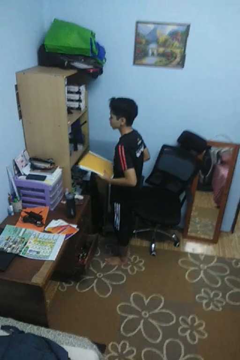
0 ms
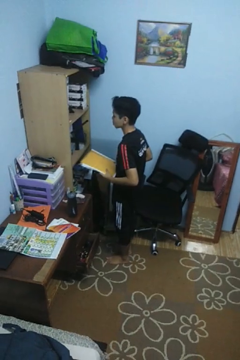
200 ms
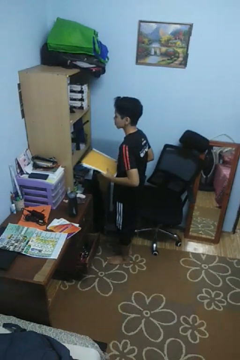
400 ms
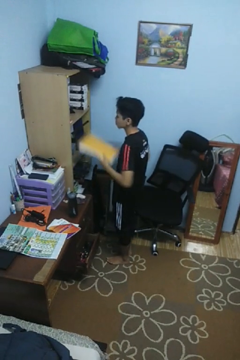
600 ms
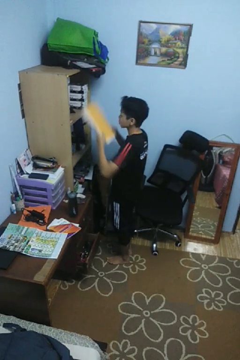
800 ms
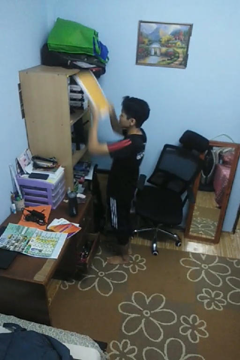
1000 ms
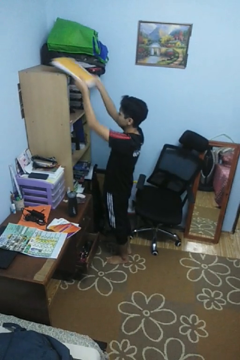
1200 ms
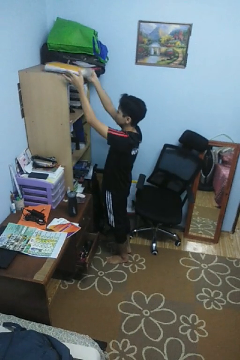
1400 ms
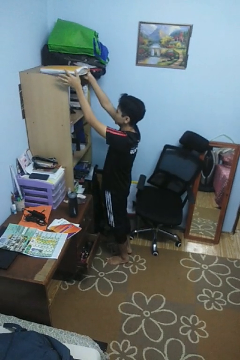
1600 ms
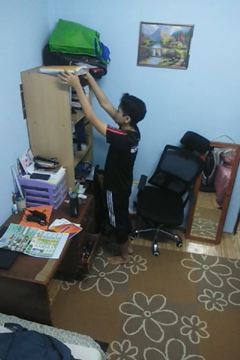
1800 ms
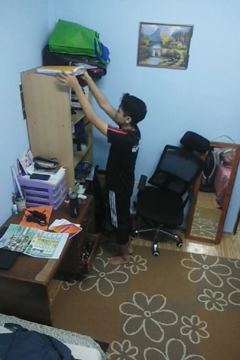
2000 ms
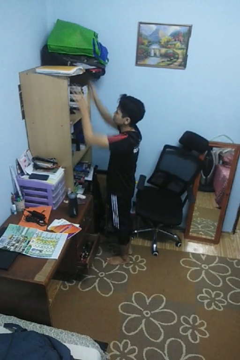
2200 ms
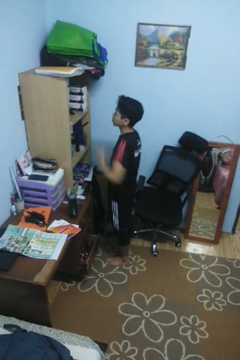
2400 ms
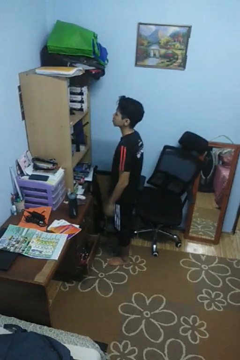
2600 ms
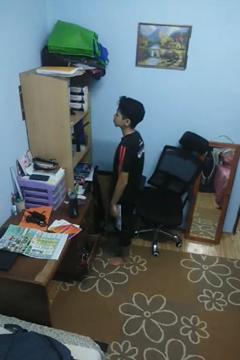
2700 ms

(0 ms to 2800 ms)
person puts down object on shelf

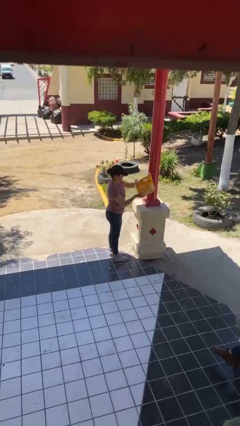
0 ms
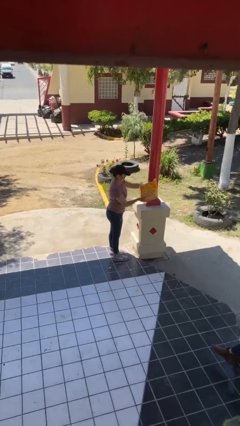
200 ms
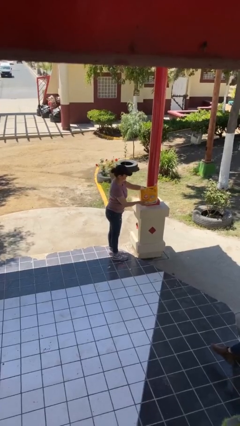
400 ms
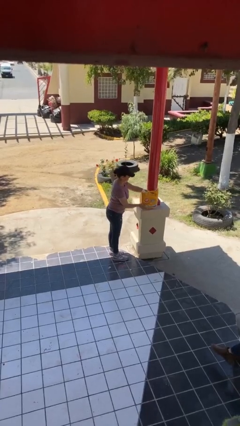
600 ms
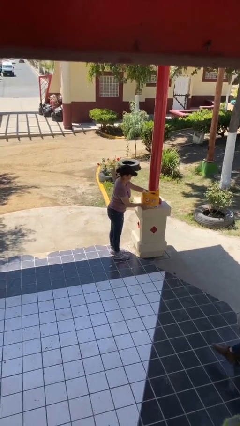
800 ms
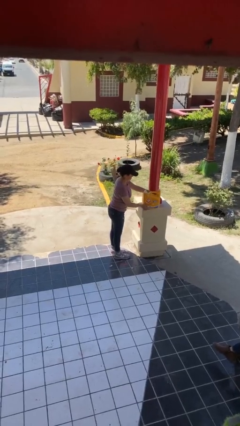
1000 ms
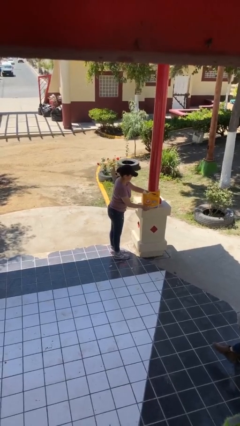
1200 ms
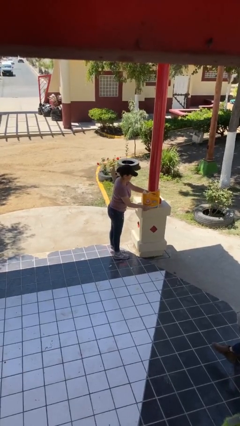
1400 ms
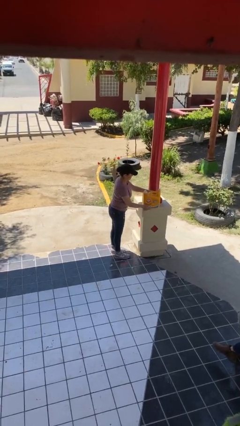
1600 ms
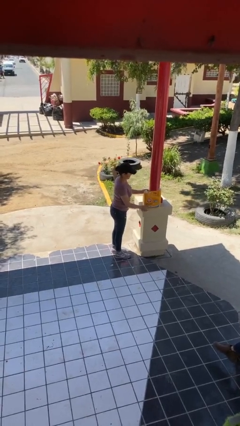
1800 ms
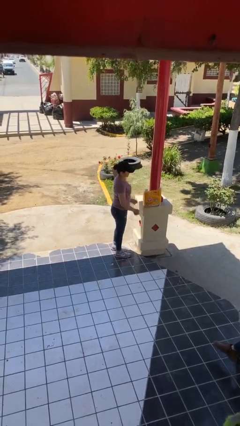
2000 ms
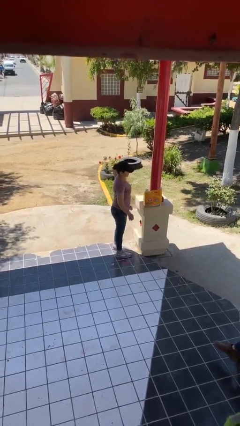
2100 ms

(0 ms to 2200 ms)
person puts down object on table

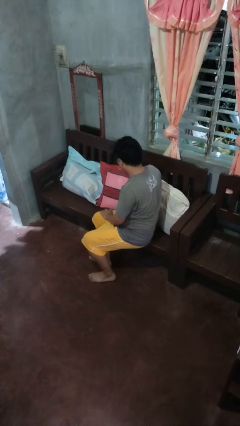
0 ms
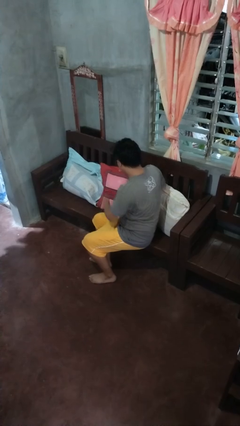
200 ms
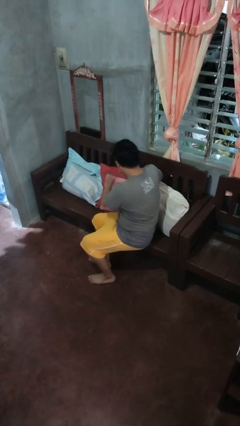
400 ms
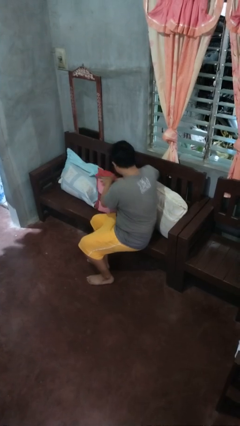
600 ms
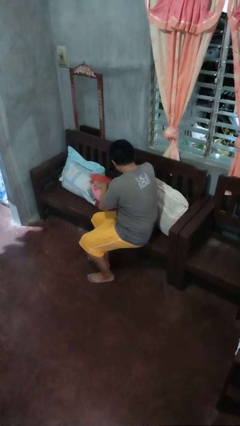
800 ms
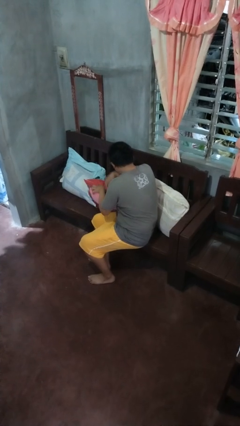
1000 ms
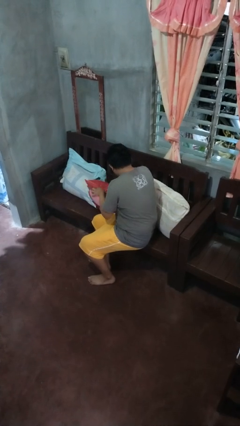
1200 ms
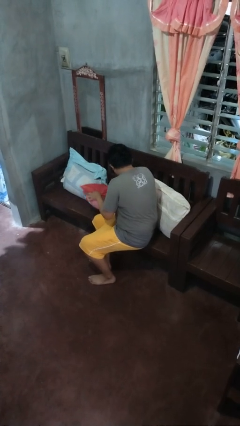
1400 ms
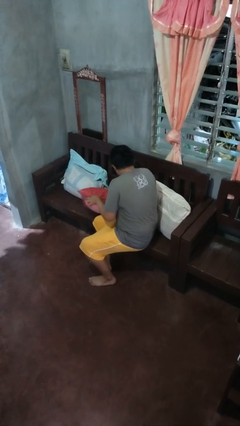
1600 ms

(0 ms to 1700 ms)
person searches in couch

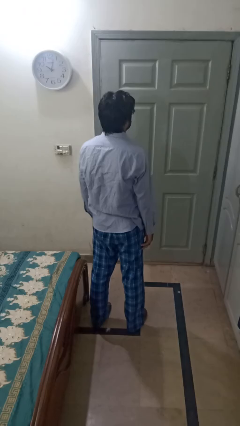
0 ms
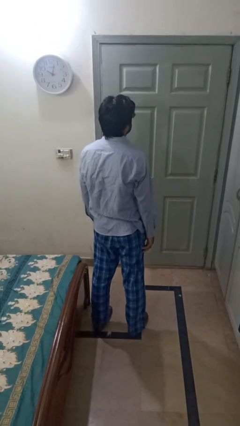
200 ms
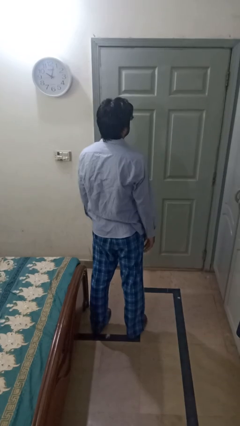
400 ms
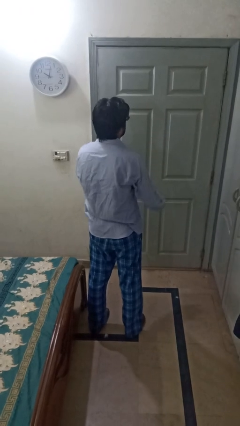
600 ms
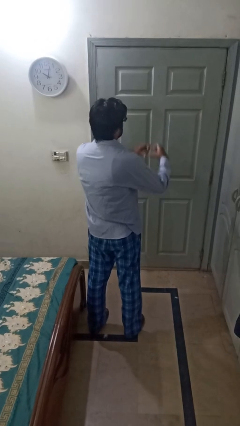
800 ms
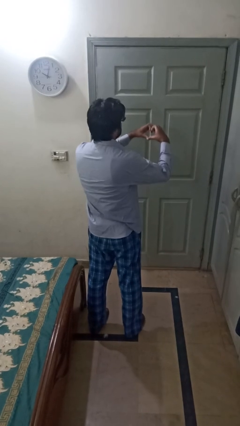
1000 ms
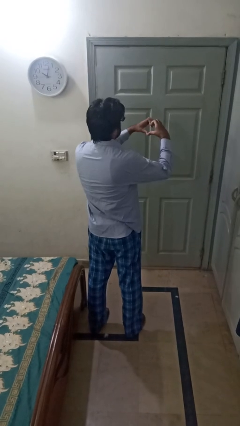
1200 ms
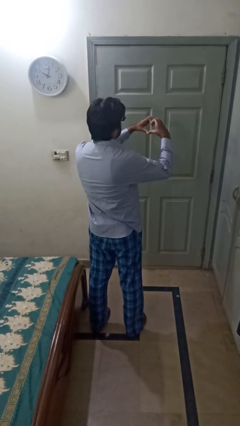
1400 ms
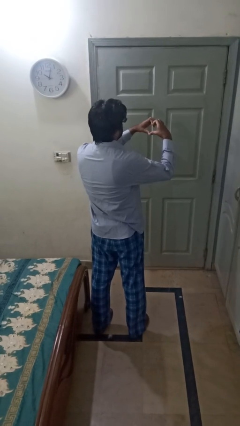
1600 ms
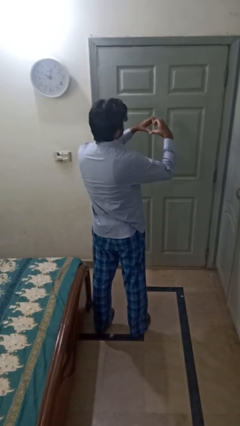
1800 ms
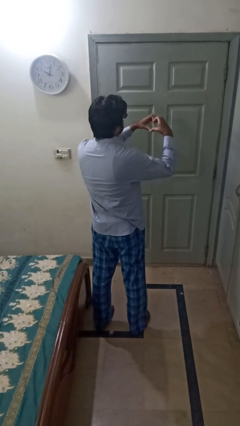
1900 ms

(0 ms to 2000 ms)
person gestures heart

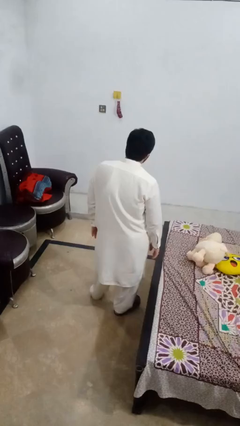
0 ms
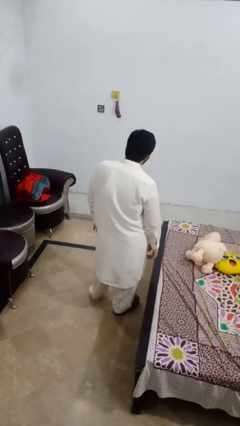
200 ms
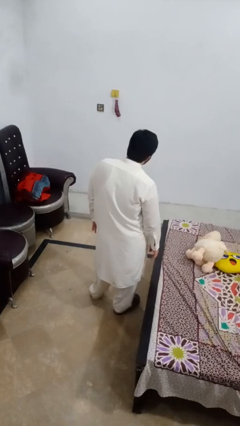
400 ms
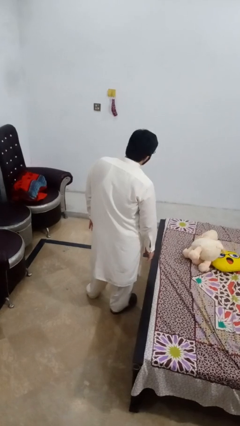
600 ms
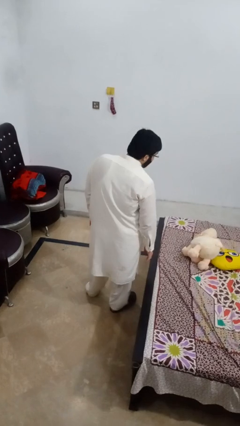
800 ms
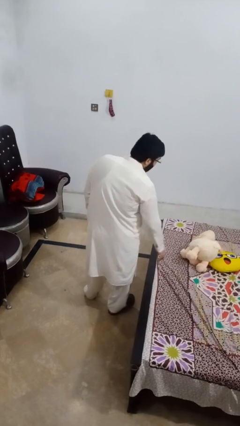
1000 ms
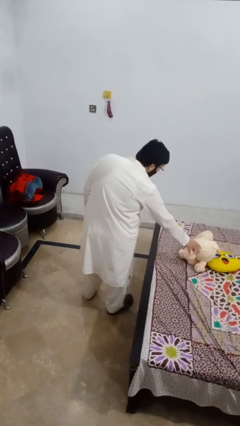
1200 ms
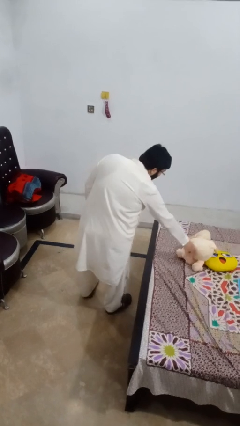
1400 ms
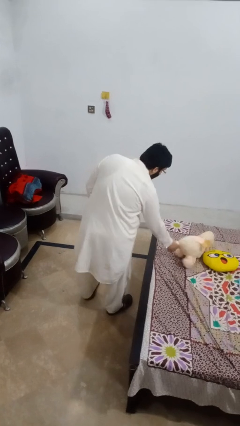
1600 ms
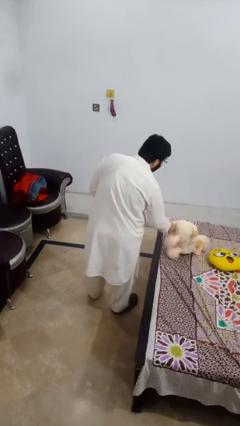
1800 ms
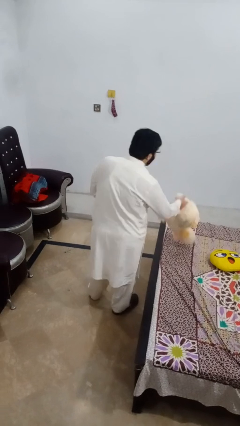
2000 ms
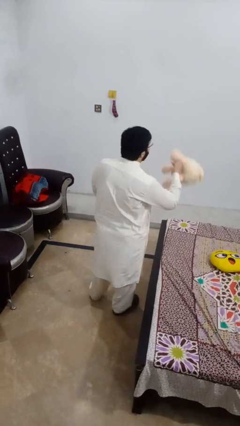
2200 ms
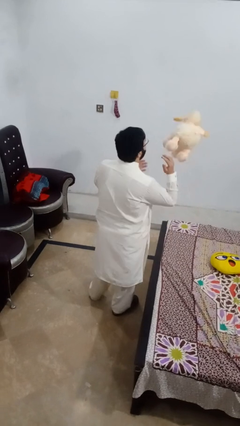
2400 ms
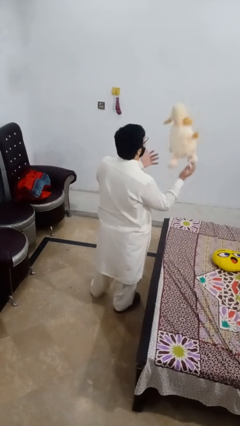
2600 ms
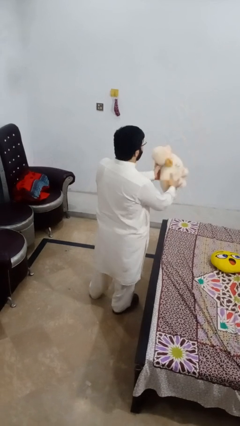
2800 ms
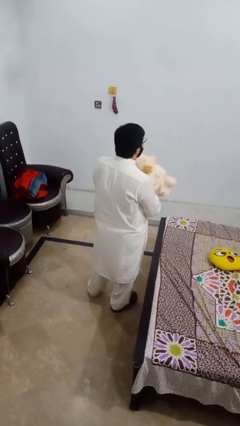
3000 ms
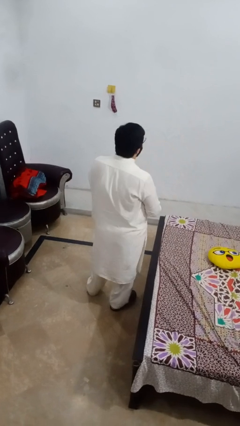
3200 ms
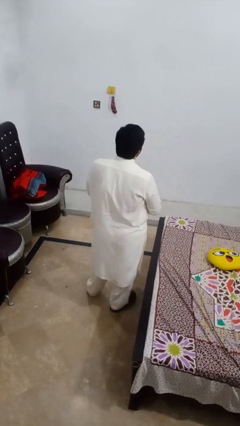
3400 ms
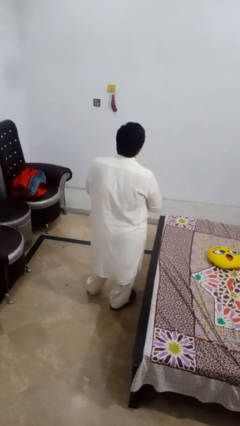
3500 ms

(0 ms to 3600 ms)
person picks up object from bed

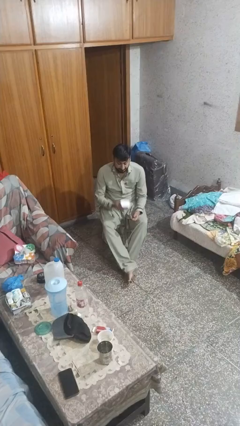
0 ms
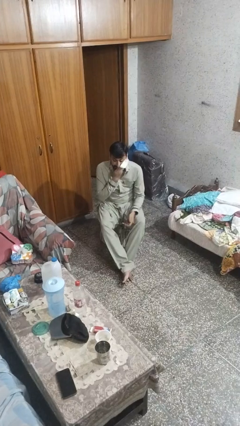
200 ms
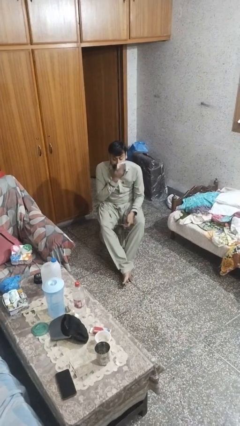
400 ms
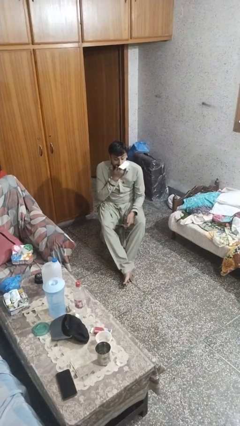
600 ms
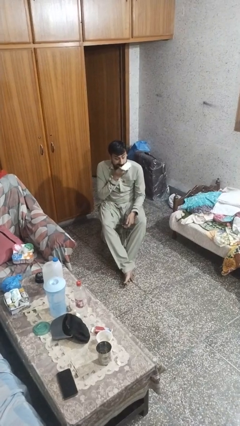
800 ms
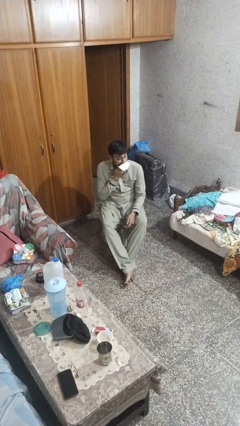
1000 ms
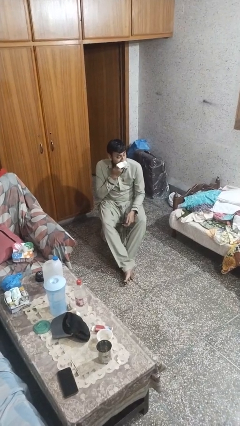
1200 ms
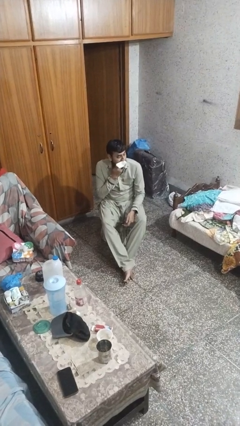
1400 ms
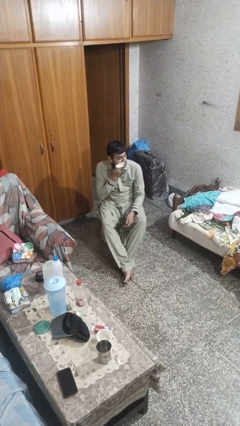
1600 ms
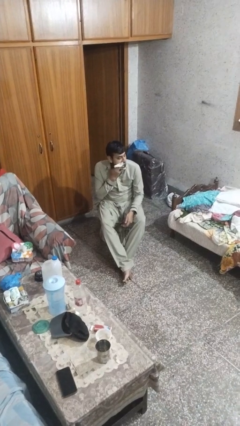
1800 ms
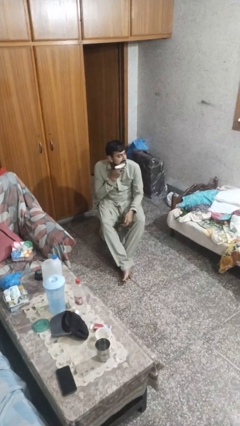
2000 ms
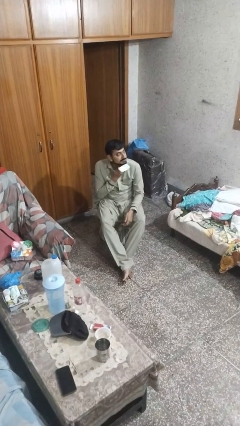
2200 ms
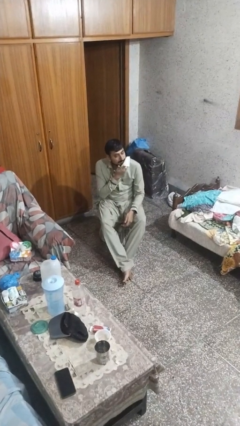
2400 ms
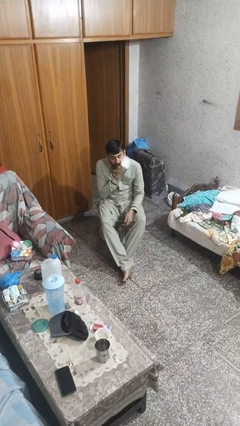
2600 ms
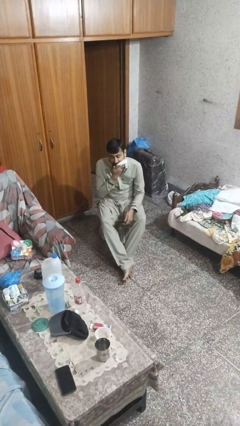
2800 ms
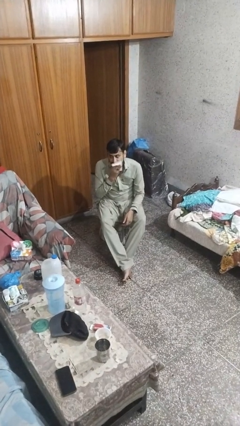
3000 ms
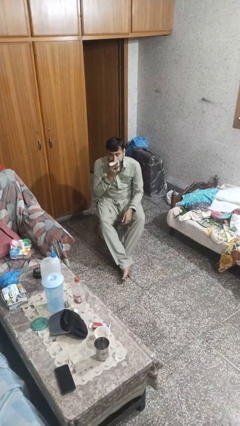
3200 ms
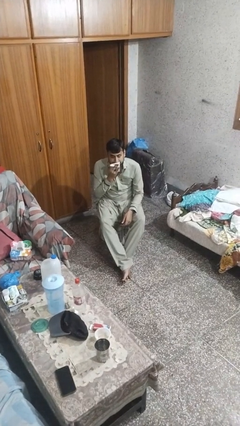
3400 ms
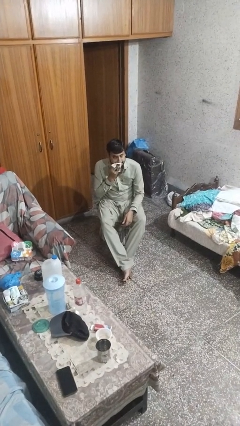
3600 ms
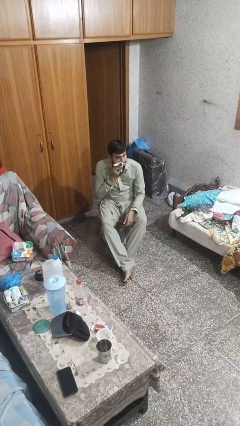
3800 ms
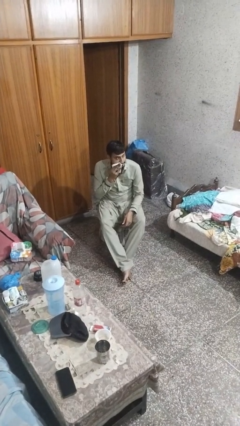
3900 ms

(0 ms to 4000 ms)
person wipes mouth with napkin

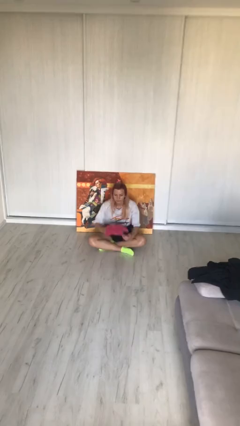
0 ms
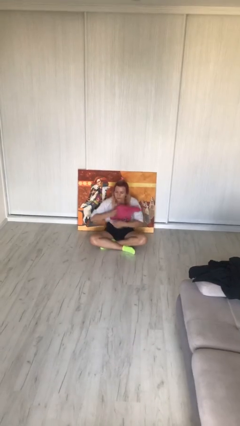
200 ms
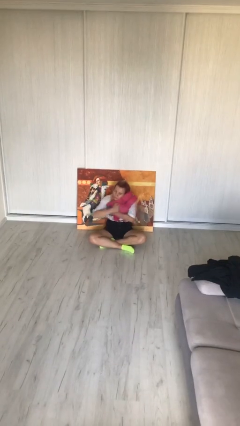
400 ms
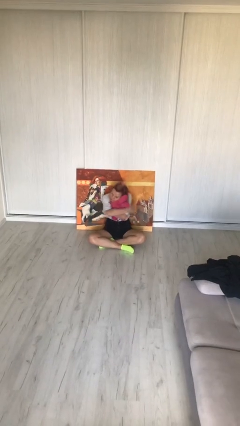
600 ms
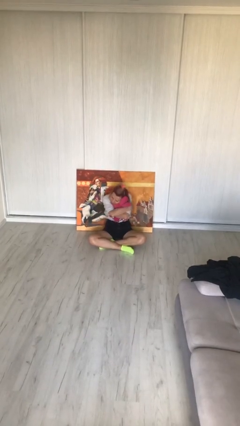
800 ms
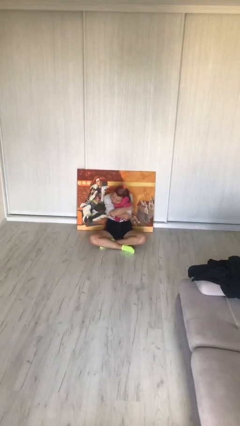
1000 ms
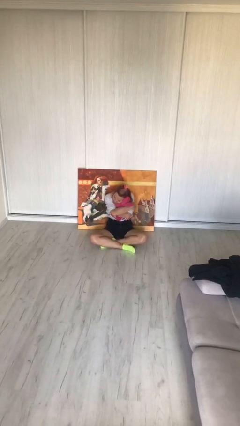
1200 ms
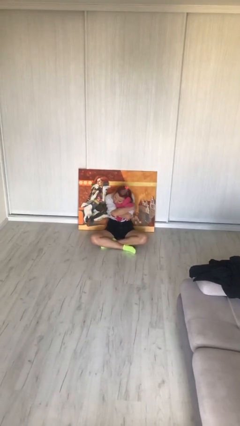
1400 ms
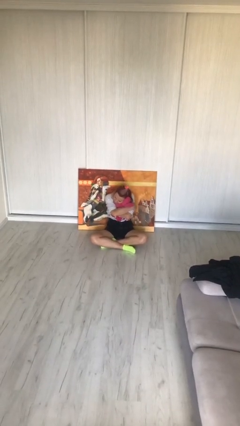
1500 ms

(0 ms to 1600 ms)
person hugs stuffed animal
